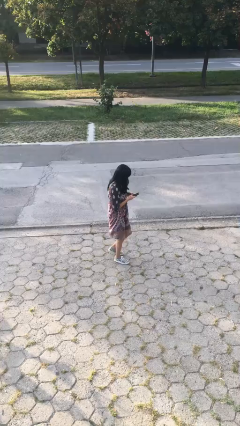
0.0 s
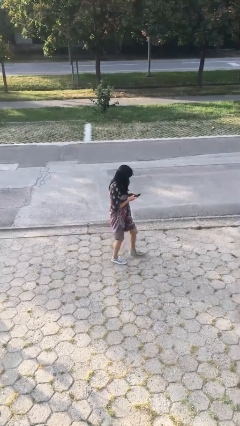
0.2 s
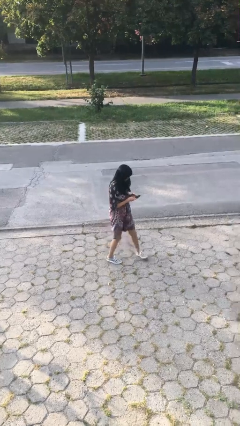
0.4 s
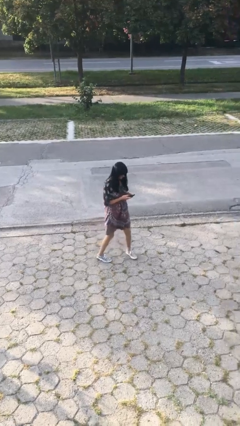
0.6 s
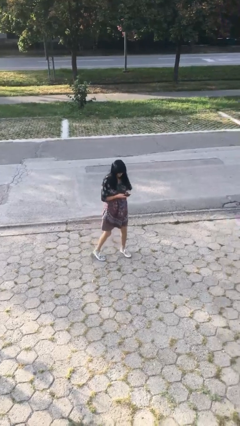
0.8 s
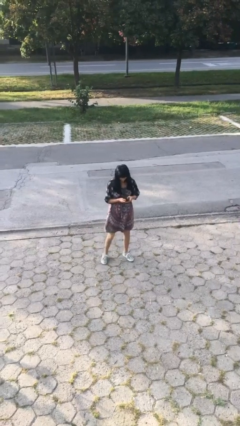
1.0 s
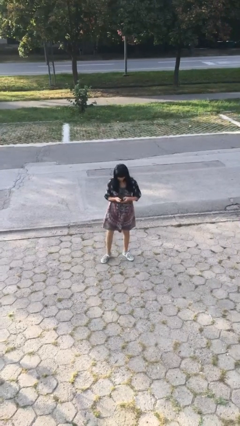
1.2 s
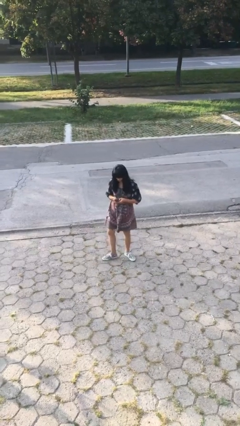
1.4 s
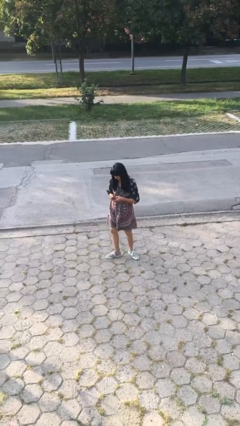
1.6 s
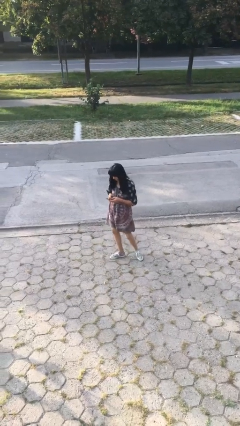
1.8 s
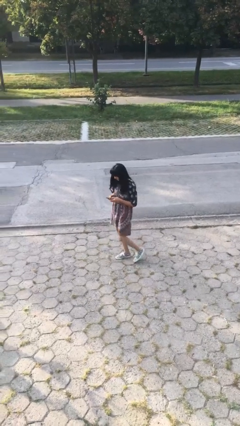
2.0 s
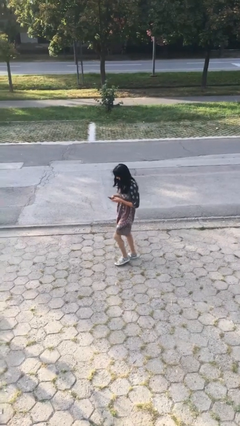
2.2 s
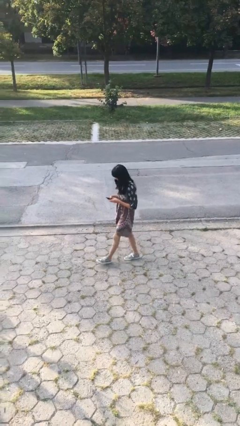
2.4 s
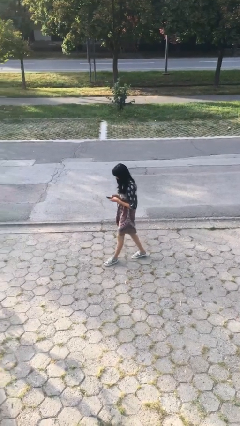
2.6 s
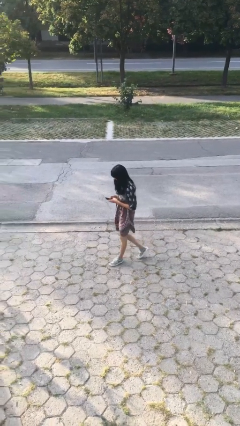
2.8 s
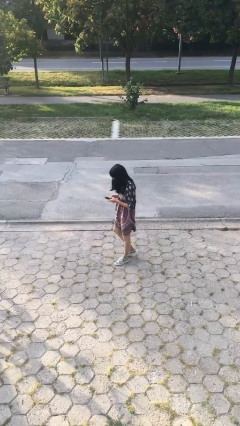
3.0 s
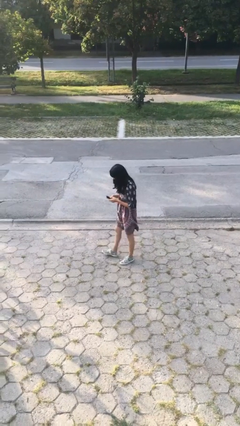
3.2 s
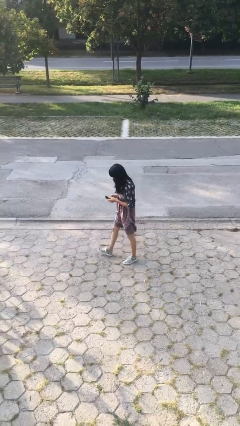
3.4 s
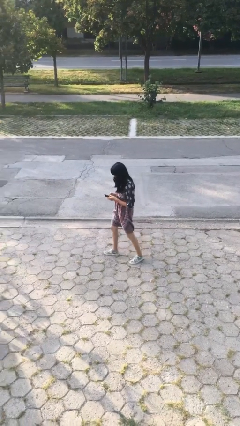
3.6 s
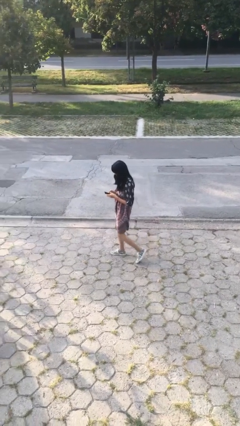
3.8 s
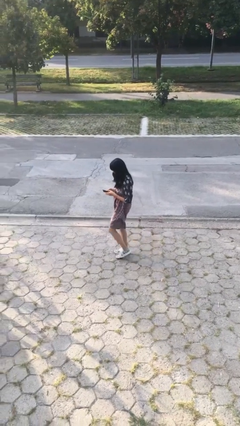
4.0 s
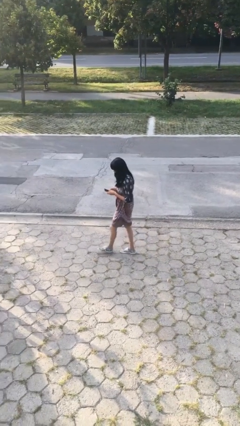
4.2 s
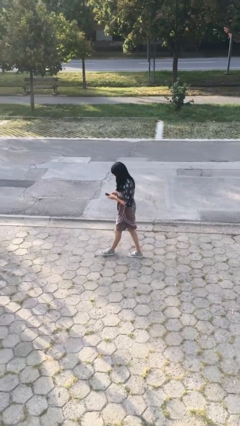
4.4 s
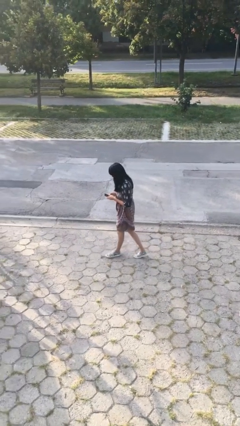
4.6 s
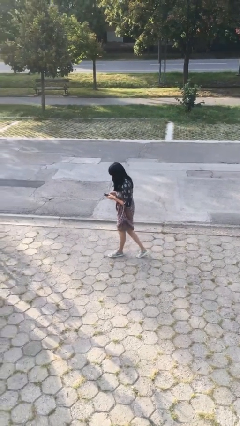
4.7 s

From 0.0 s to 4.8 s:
person texts on phone

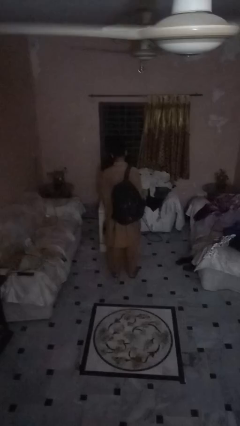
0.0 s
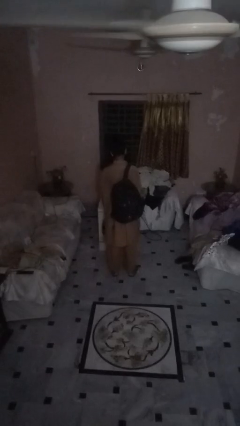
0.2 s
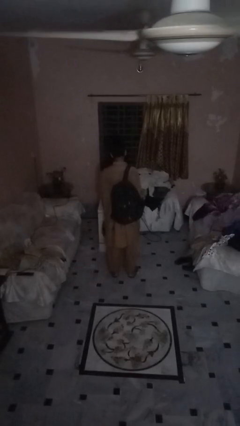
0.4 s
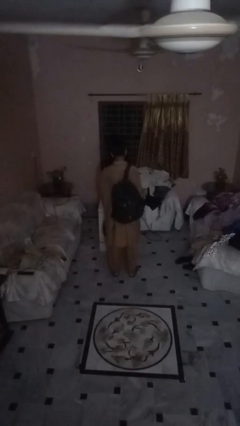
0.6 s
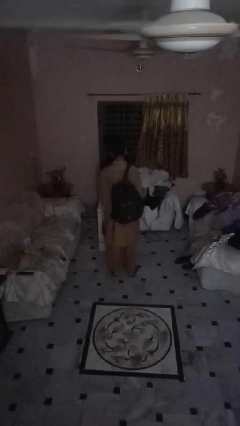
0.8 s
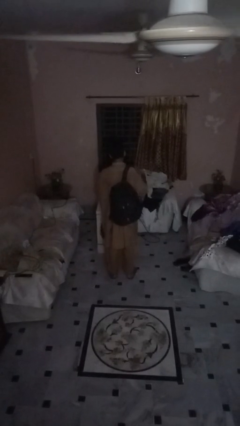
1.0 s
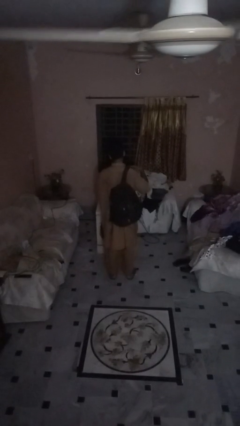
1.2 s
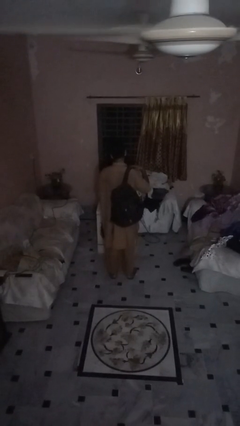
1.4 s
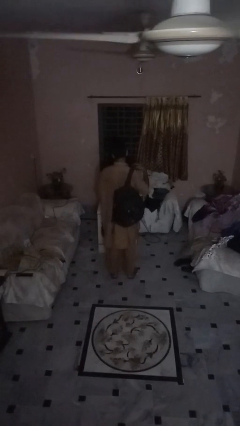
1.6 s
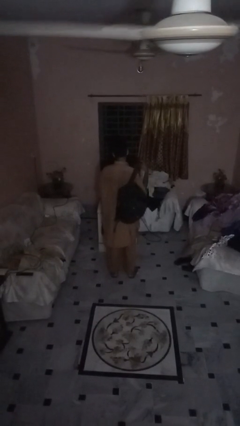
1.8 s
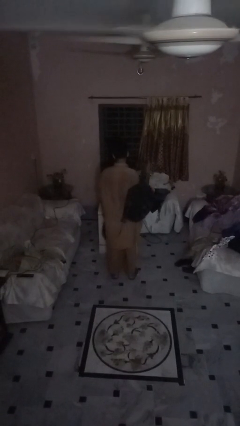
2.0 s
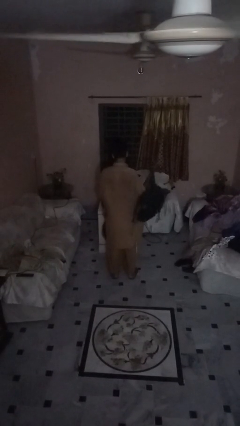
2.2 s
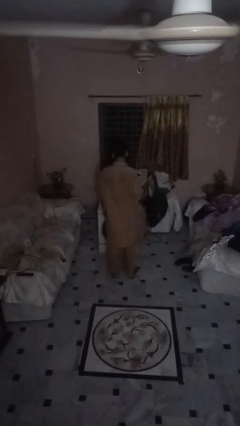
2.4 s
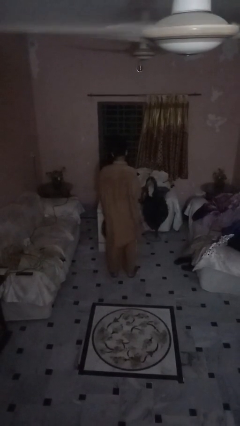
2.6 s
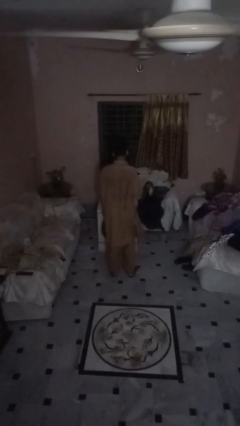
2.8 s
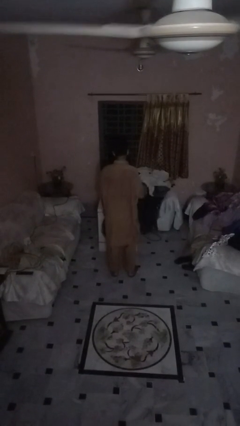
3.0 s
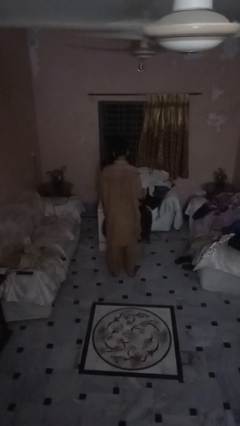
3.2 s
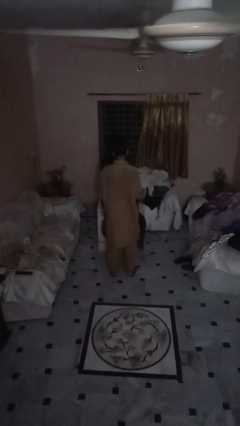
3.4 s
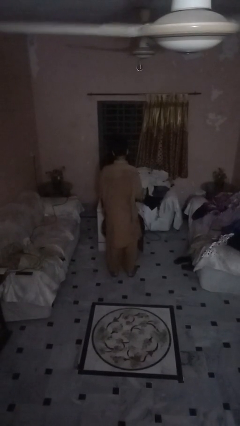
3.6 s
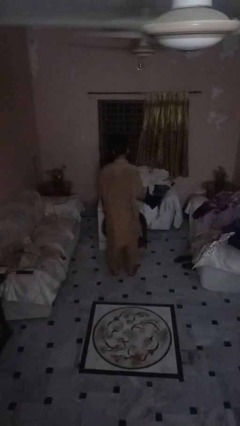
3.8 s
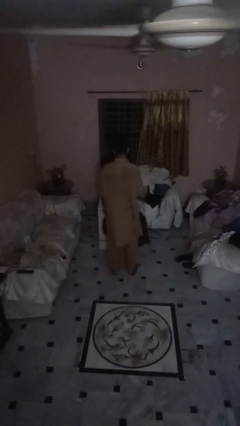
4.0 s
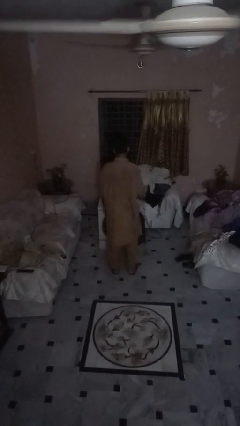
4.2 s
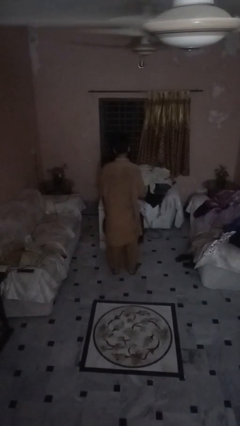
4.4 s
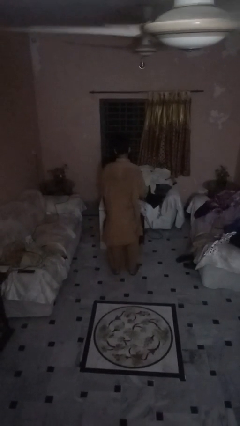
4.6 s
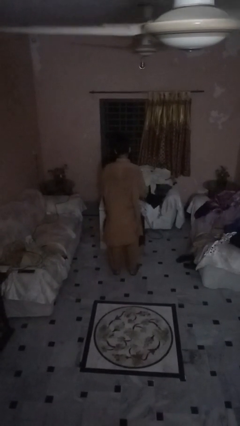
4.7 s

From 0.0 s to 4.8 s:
person takes off backpack

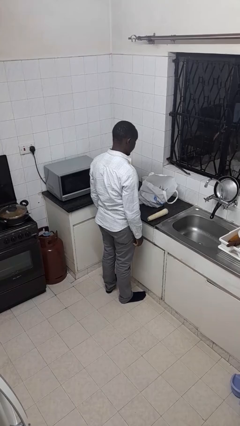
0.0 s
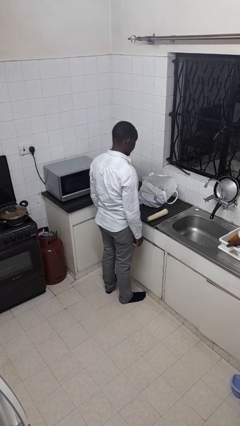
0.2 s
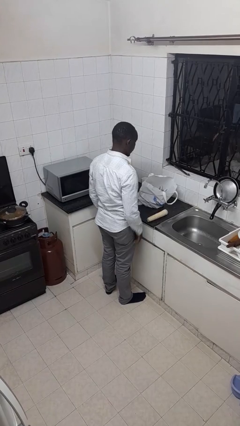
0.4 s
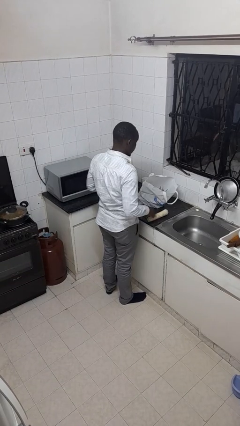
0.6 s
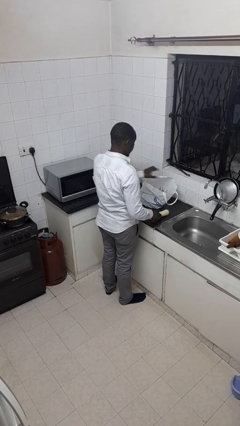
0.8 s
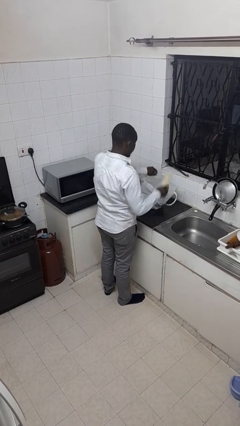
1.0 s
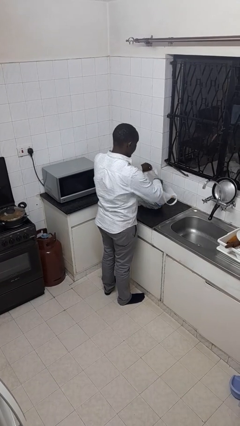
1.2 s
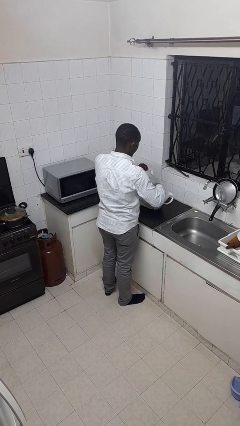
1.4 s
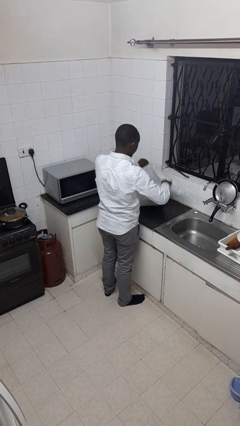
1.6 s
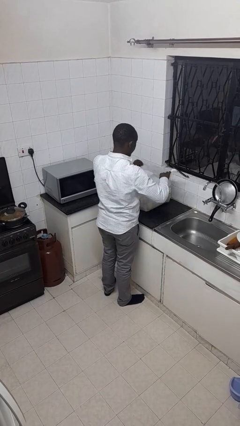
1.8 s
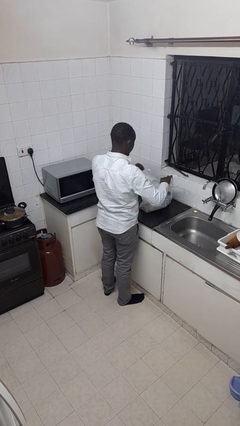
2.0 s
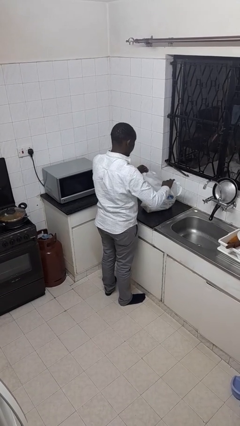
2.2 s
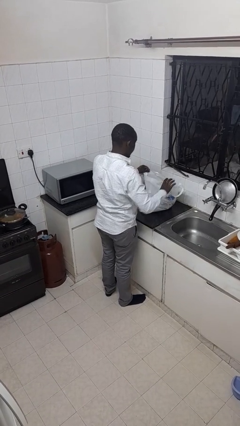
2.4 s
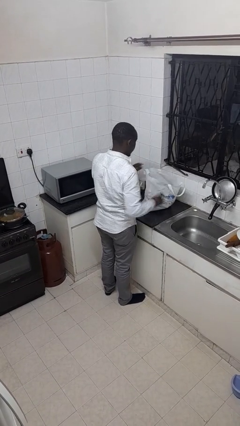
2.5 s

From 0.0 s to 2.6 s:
person puts object into bag

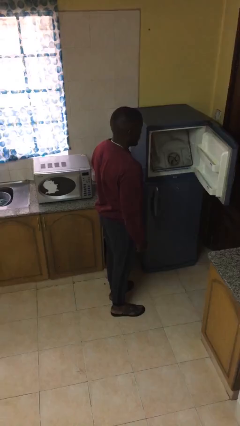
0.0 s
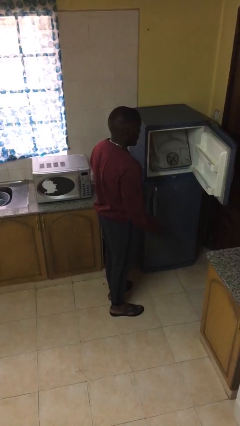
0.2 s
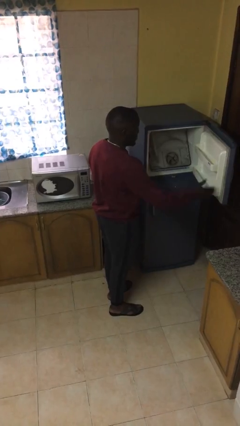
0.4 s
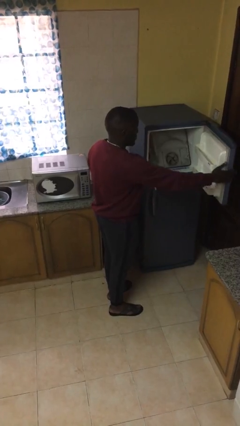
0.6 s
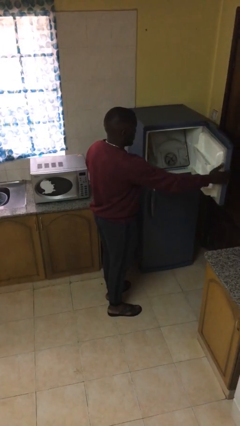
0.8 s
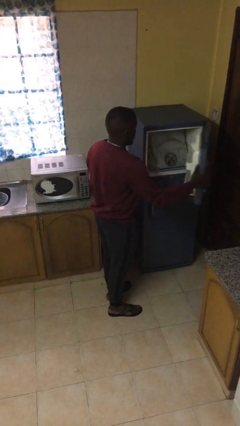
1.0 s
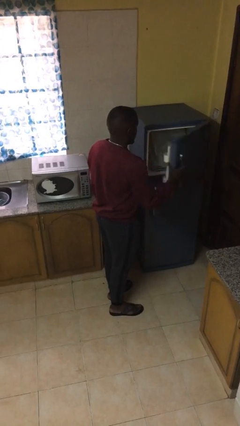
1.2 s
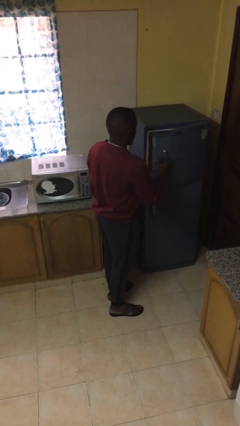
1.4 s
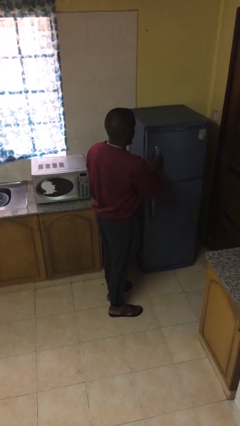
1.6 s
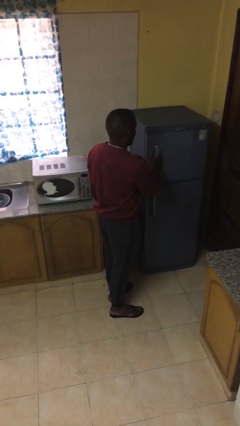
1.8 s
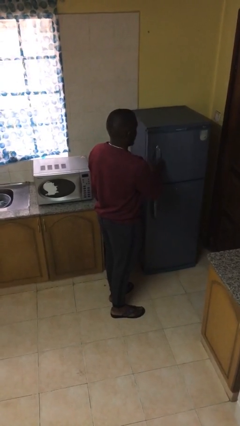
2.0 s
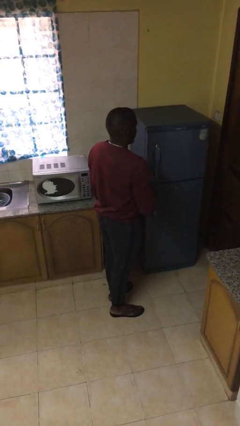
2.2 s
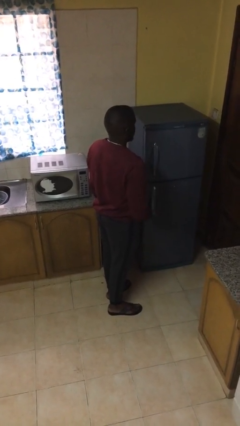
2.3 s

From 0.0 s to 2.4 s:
person closes refrigerator

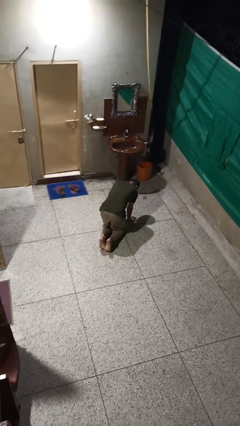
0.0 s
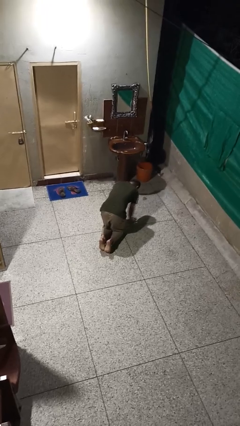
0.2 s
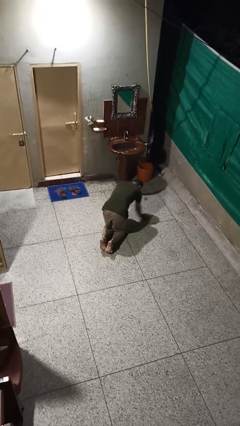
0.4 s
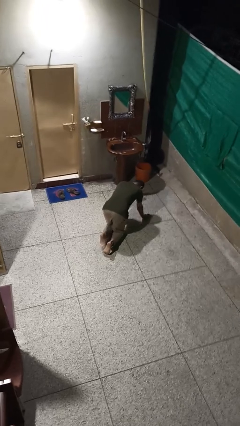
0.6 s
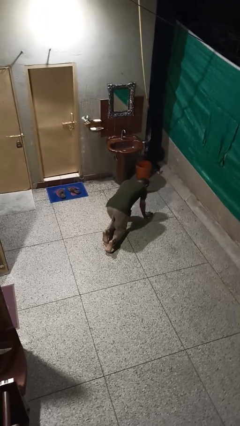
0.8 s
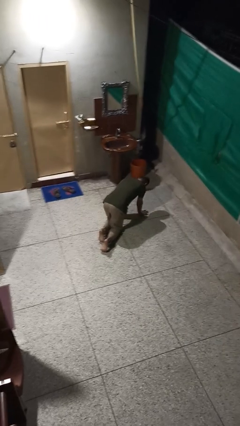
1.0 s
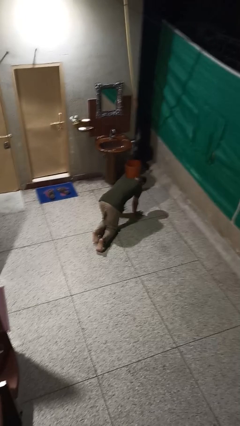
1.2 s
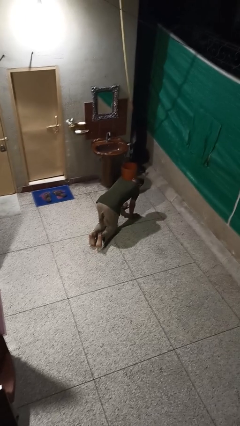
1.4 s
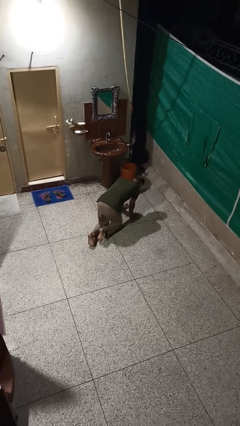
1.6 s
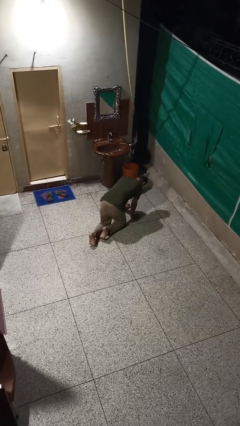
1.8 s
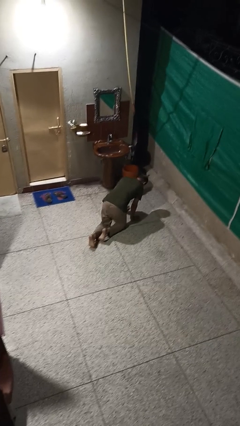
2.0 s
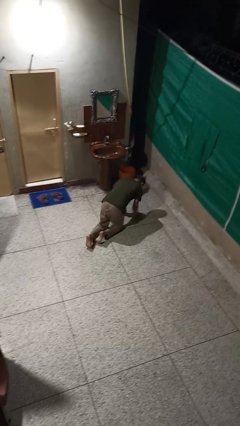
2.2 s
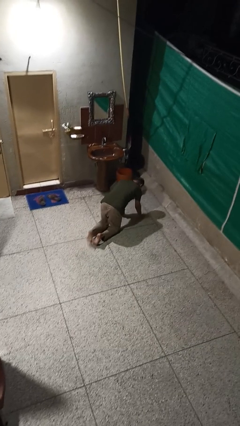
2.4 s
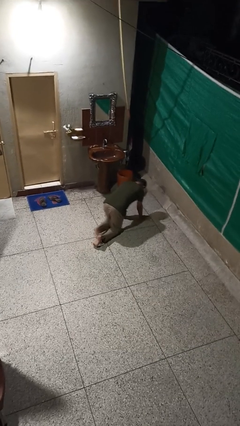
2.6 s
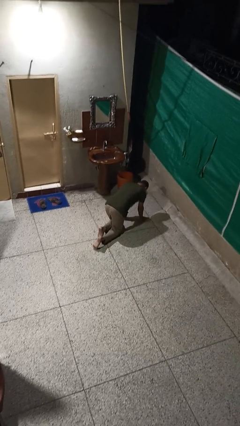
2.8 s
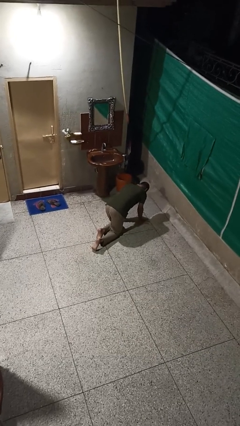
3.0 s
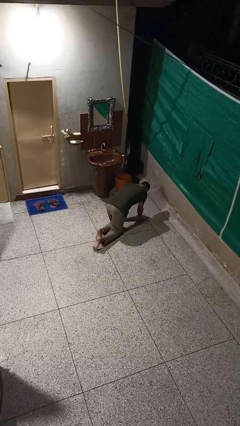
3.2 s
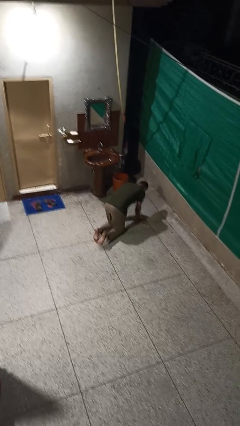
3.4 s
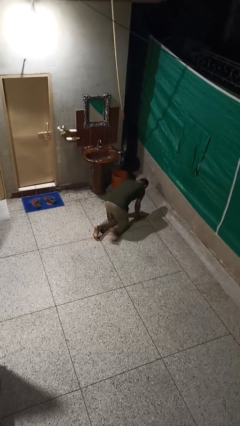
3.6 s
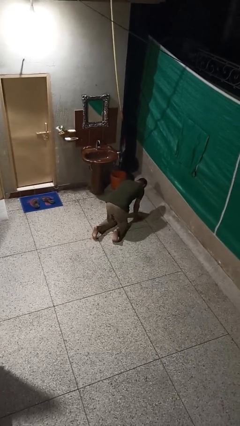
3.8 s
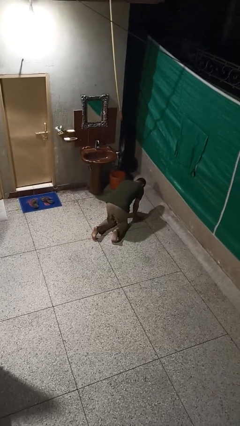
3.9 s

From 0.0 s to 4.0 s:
person crawls
